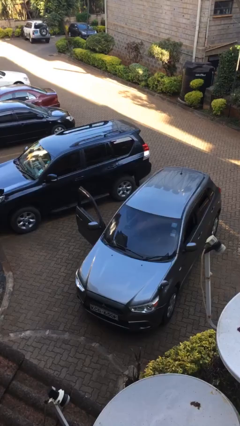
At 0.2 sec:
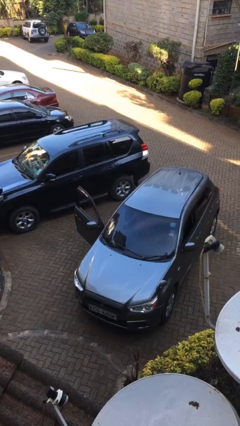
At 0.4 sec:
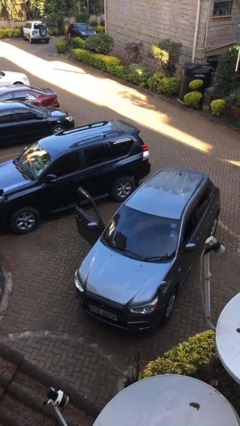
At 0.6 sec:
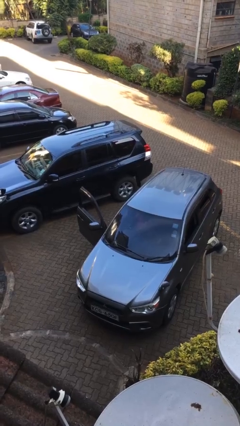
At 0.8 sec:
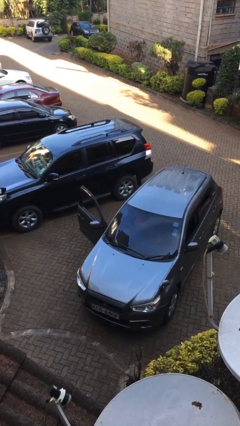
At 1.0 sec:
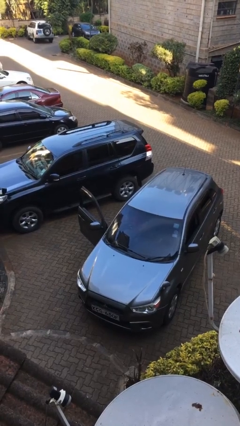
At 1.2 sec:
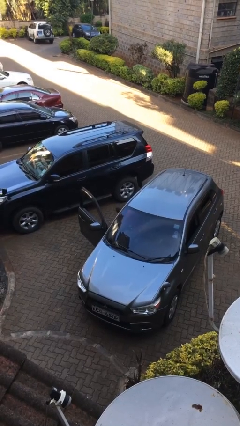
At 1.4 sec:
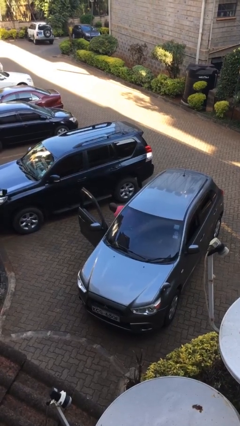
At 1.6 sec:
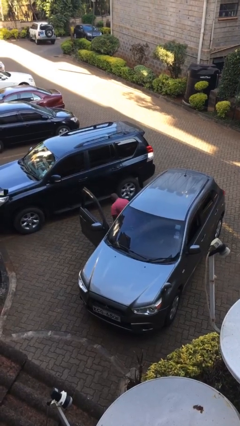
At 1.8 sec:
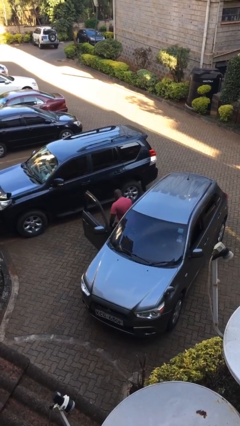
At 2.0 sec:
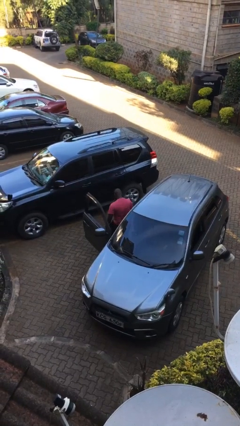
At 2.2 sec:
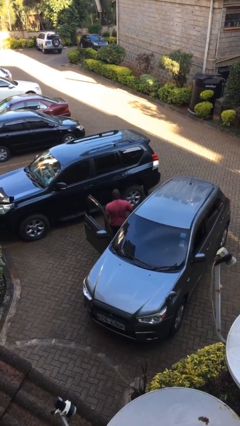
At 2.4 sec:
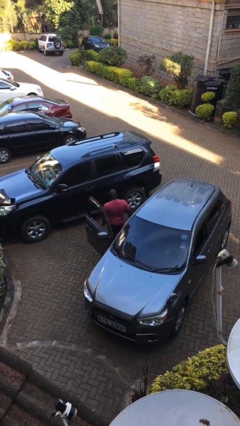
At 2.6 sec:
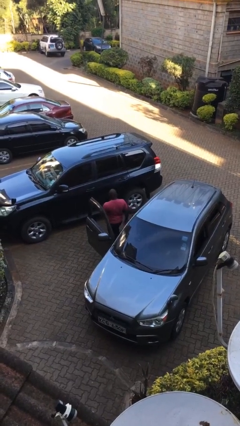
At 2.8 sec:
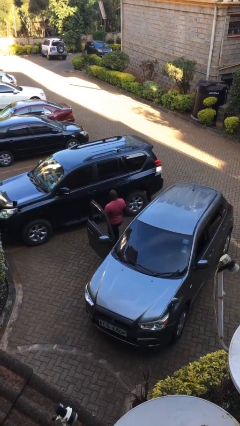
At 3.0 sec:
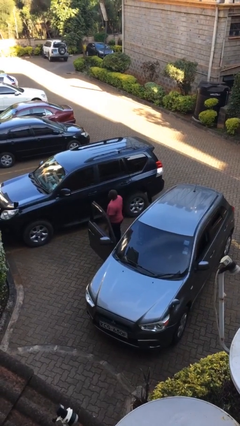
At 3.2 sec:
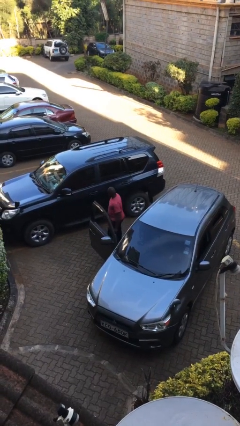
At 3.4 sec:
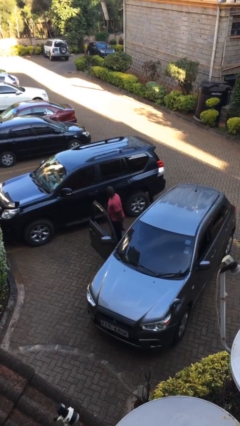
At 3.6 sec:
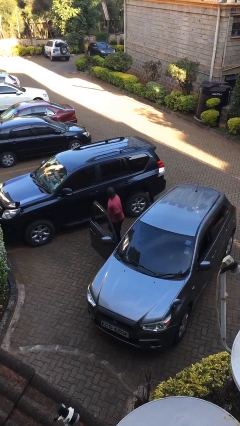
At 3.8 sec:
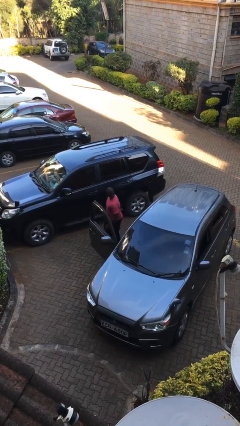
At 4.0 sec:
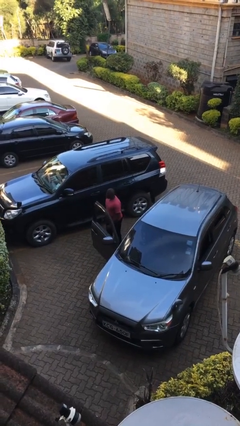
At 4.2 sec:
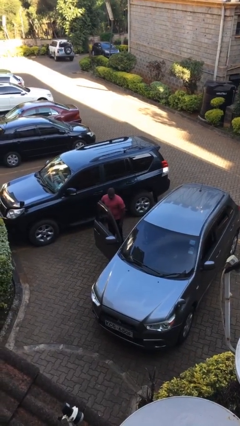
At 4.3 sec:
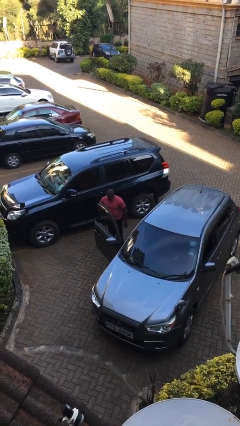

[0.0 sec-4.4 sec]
person exits car

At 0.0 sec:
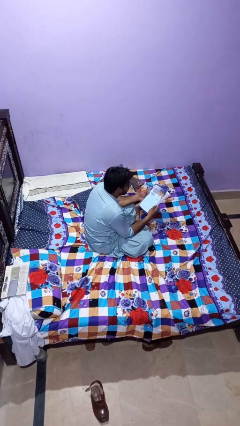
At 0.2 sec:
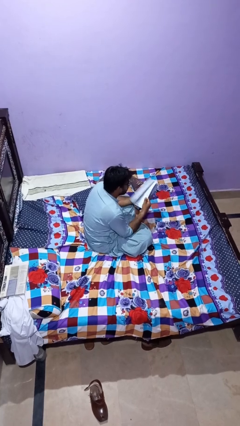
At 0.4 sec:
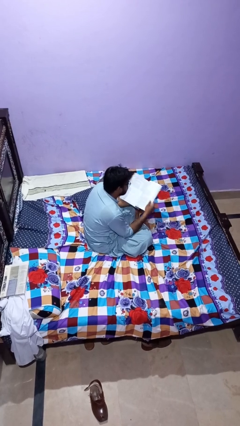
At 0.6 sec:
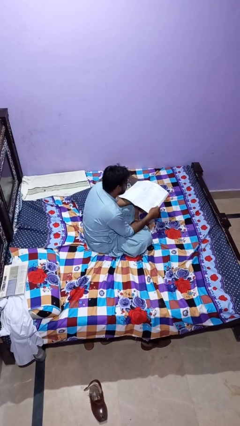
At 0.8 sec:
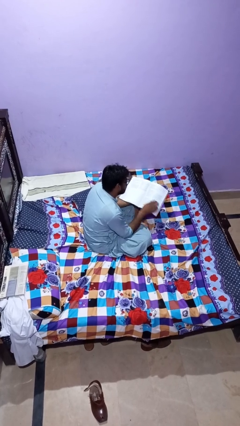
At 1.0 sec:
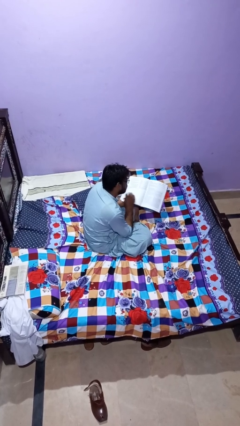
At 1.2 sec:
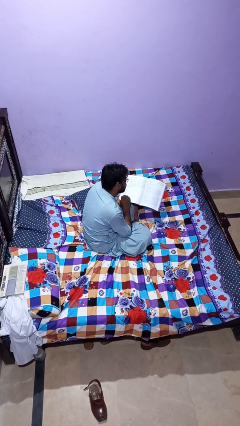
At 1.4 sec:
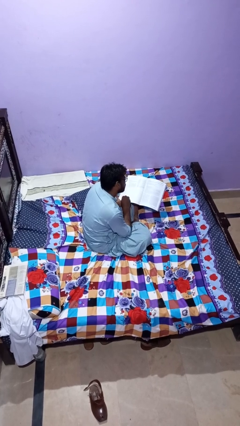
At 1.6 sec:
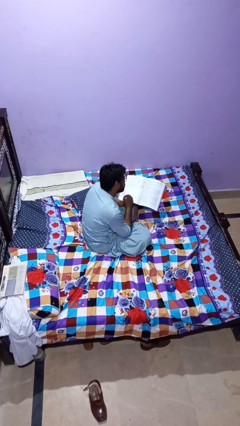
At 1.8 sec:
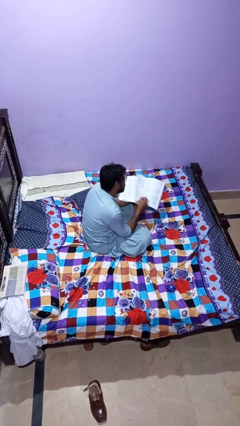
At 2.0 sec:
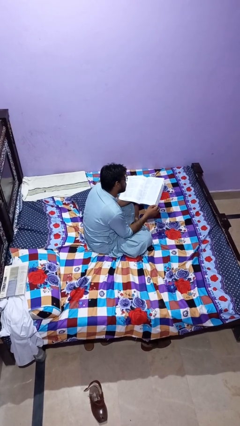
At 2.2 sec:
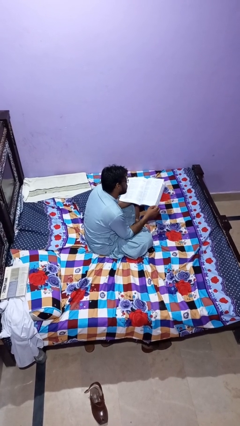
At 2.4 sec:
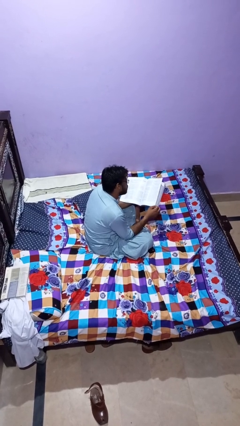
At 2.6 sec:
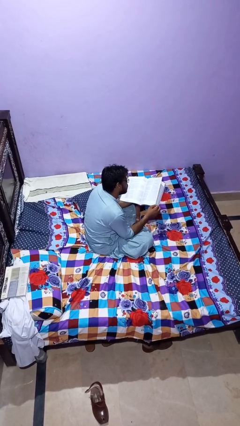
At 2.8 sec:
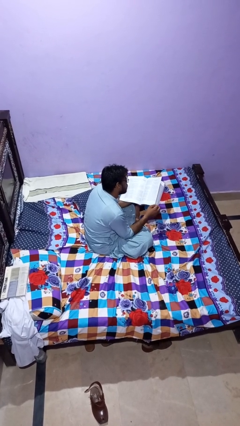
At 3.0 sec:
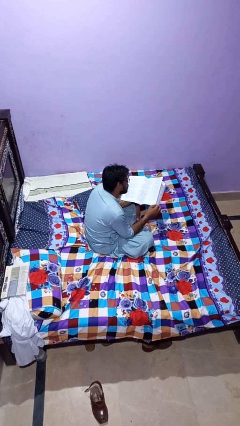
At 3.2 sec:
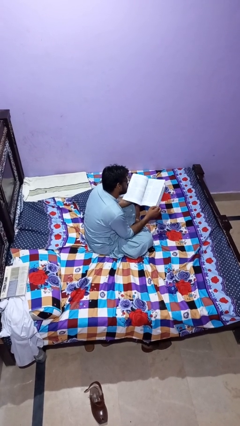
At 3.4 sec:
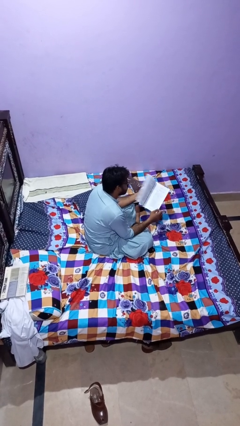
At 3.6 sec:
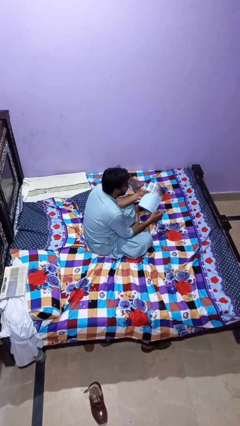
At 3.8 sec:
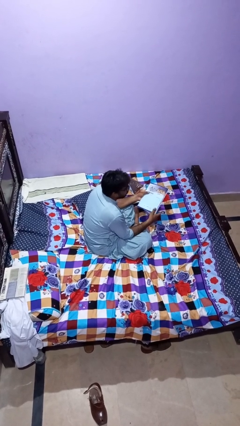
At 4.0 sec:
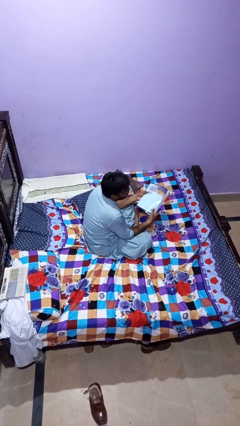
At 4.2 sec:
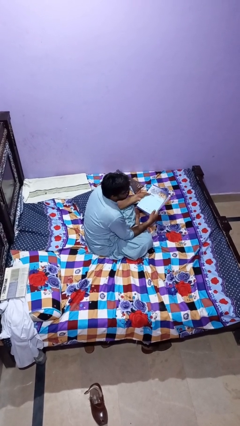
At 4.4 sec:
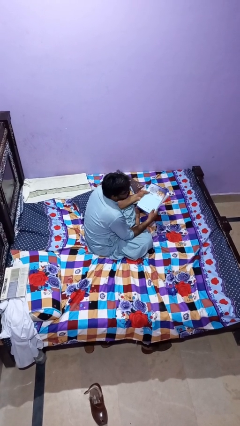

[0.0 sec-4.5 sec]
person reads magazine

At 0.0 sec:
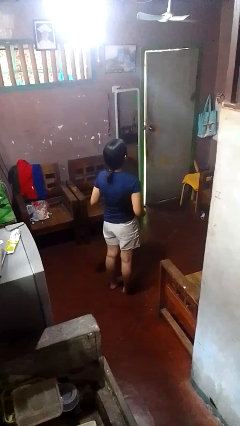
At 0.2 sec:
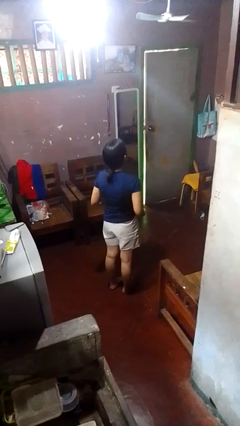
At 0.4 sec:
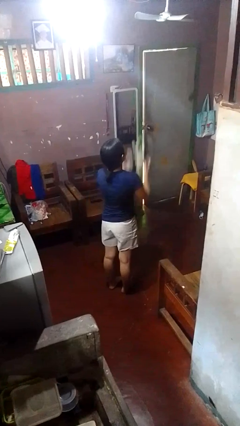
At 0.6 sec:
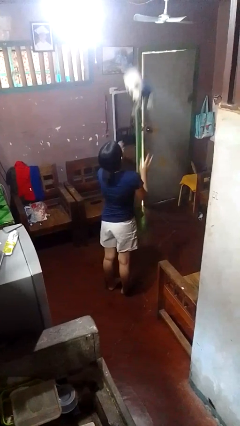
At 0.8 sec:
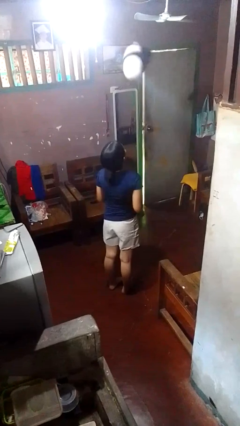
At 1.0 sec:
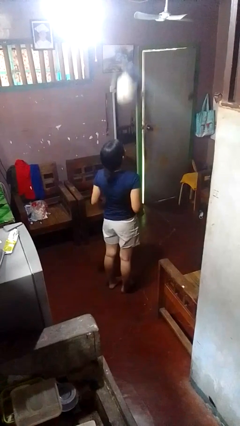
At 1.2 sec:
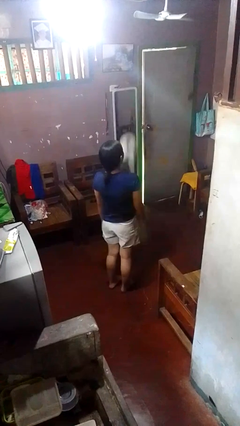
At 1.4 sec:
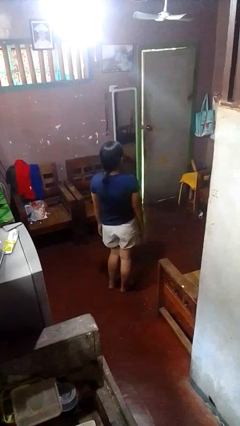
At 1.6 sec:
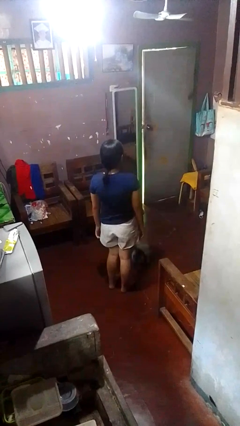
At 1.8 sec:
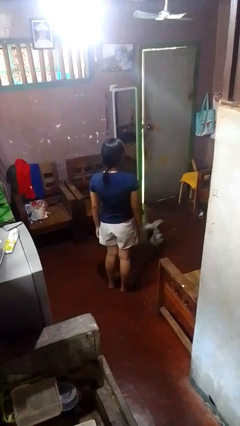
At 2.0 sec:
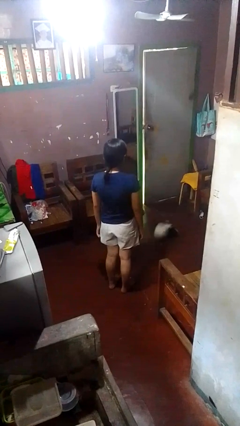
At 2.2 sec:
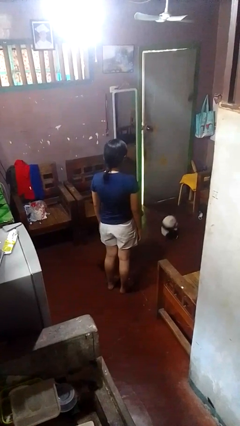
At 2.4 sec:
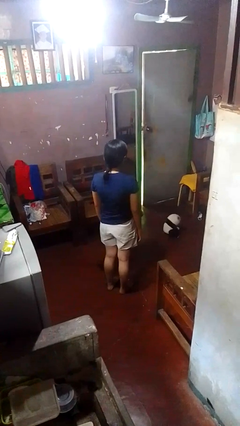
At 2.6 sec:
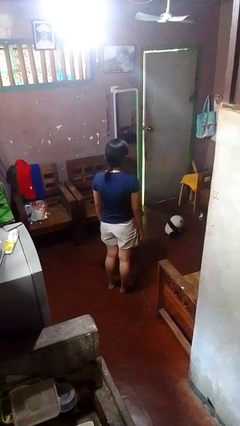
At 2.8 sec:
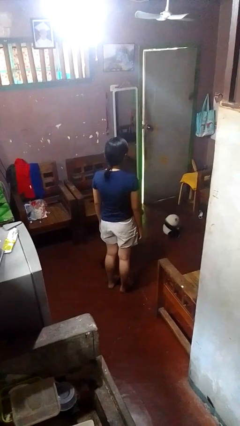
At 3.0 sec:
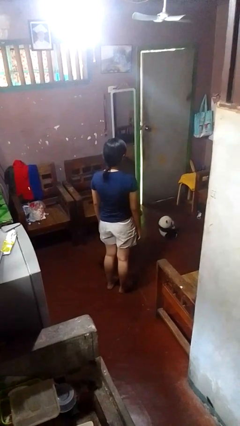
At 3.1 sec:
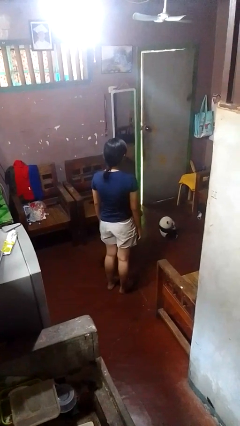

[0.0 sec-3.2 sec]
person throws object into air

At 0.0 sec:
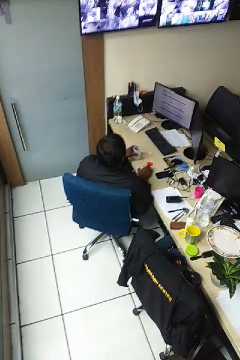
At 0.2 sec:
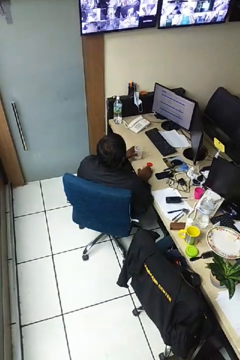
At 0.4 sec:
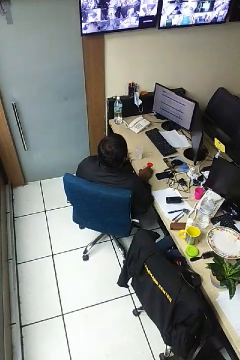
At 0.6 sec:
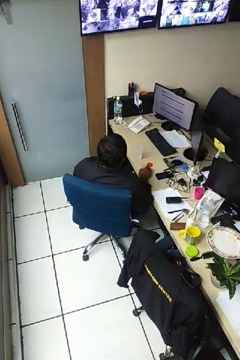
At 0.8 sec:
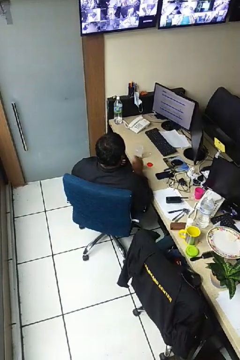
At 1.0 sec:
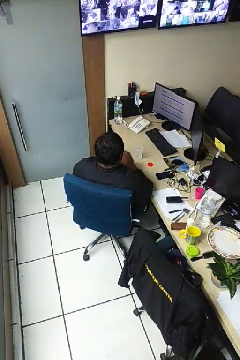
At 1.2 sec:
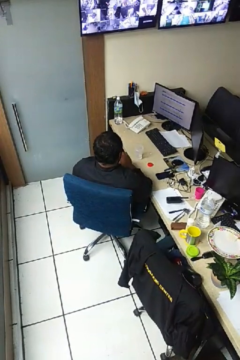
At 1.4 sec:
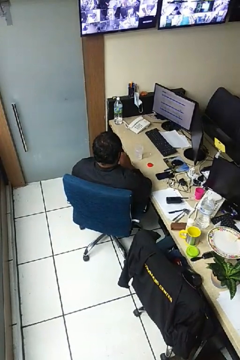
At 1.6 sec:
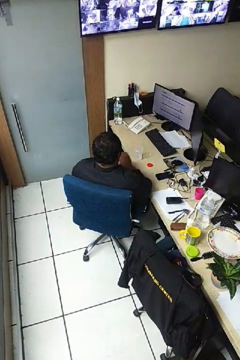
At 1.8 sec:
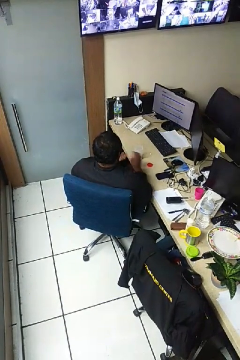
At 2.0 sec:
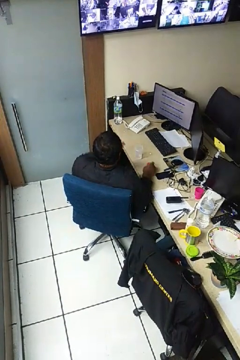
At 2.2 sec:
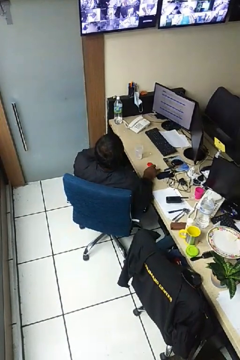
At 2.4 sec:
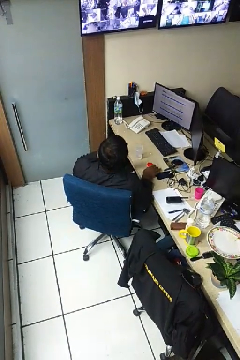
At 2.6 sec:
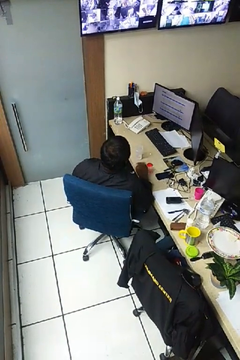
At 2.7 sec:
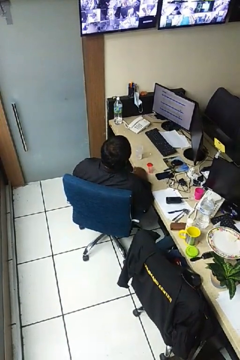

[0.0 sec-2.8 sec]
person takes medicine pills

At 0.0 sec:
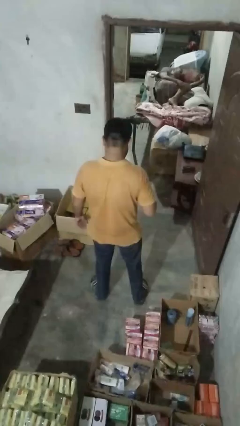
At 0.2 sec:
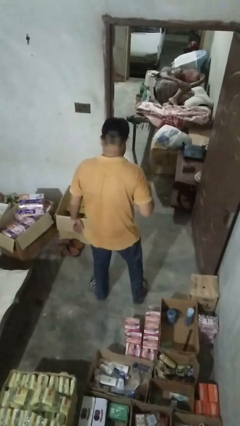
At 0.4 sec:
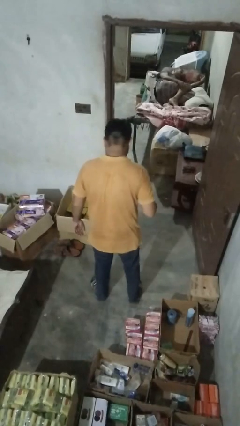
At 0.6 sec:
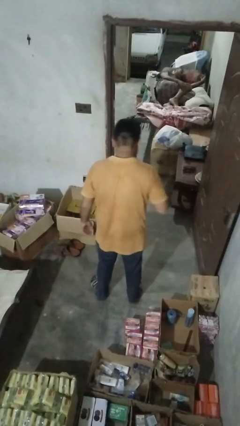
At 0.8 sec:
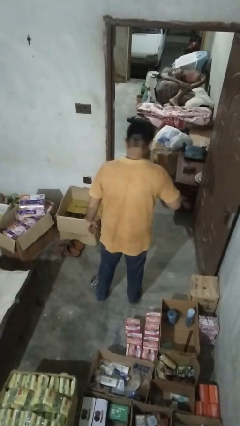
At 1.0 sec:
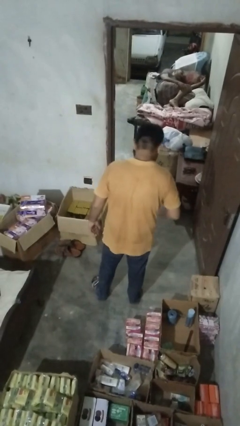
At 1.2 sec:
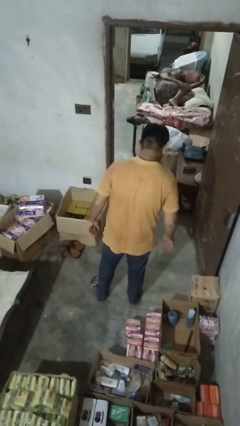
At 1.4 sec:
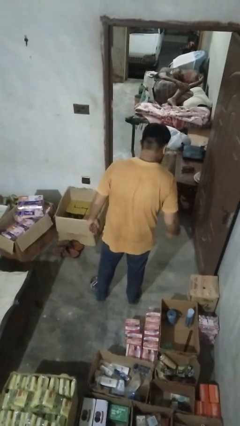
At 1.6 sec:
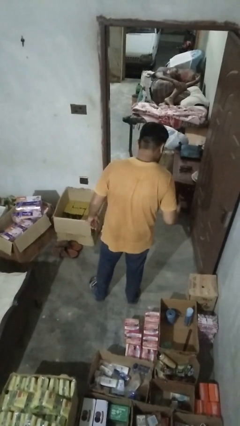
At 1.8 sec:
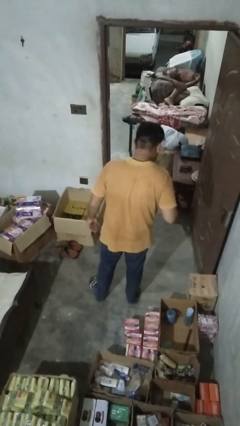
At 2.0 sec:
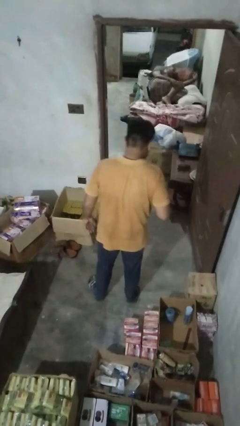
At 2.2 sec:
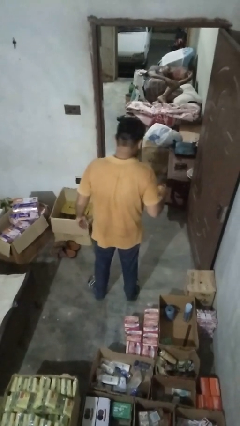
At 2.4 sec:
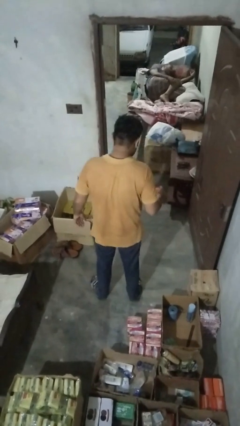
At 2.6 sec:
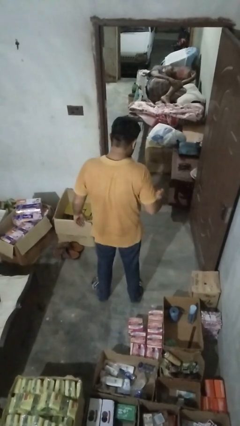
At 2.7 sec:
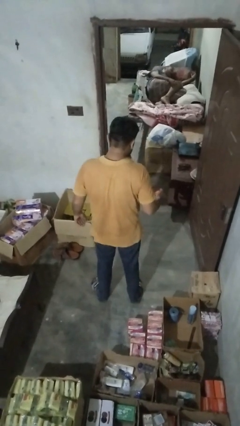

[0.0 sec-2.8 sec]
person bounces ball on floor
